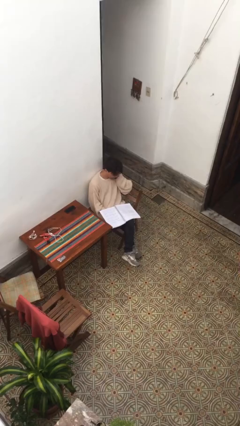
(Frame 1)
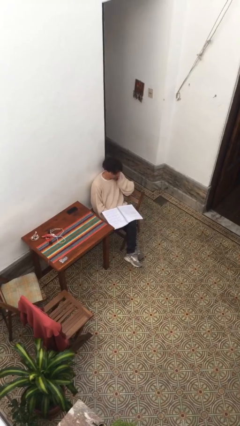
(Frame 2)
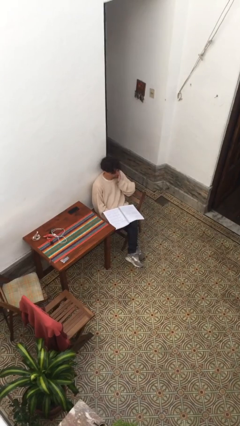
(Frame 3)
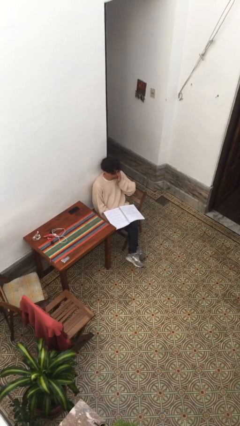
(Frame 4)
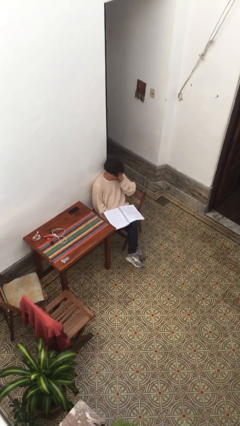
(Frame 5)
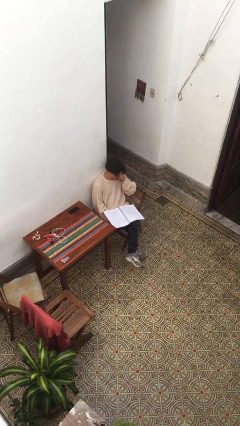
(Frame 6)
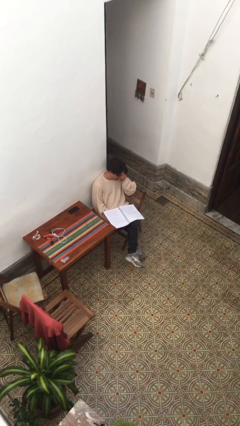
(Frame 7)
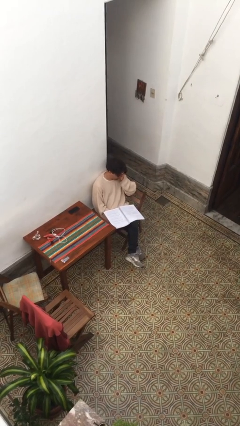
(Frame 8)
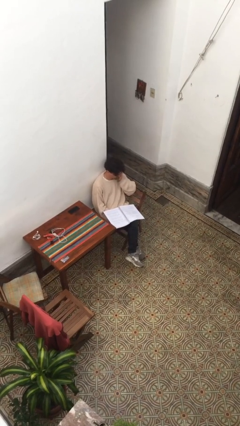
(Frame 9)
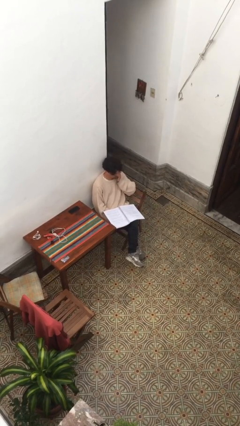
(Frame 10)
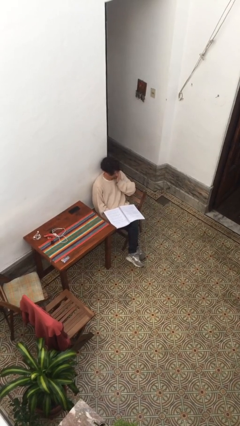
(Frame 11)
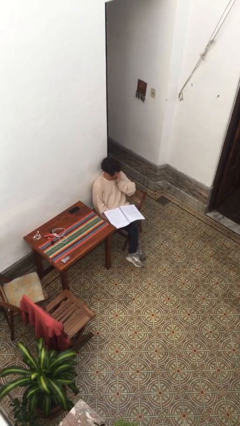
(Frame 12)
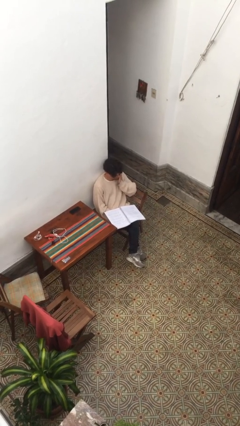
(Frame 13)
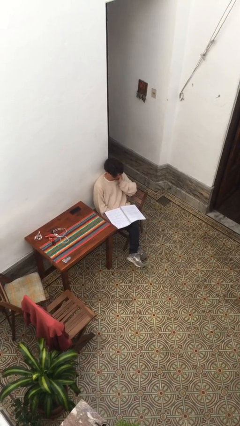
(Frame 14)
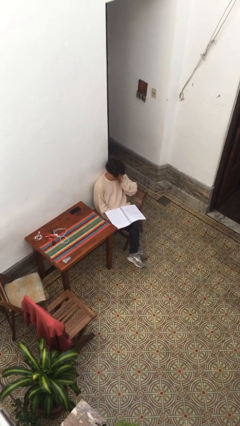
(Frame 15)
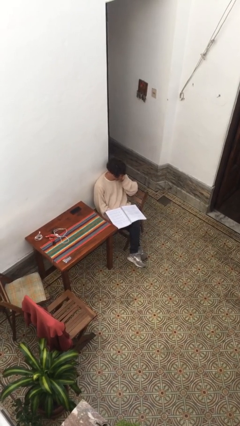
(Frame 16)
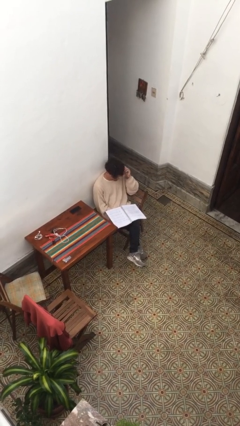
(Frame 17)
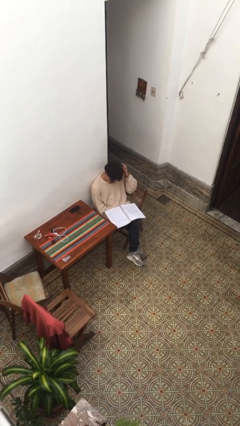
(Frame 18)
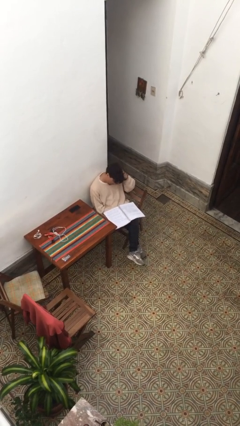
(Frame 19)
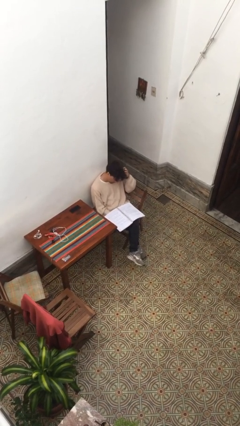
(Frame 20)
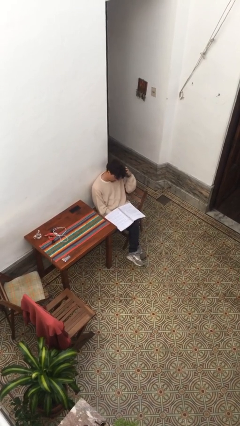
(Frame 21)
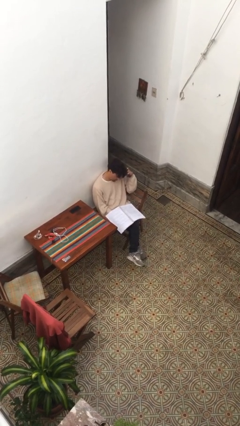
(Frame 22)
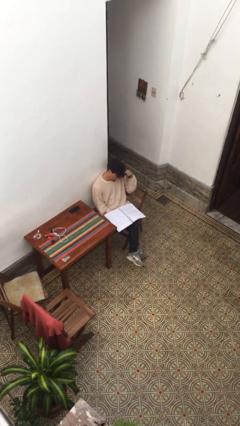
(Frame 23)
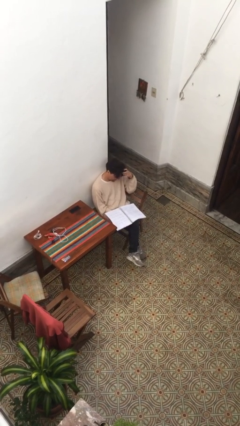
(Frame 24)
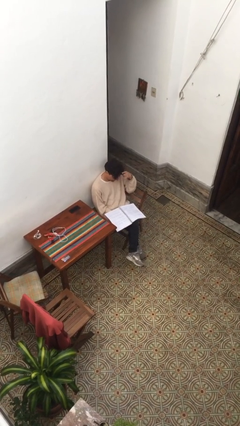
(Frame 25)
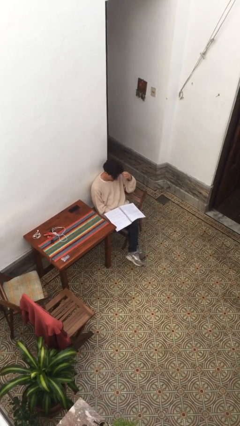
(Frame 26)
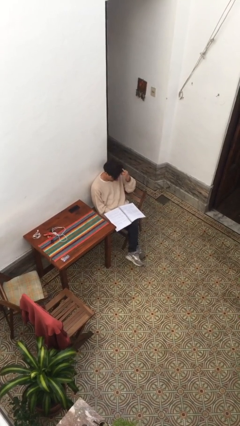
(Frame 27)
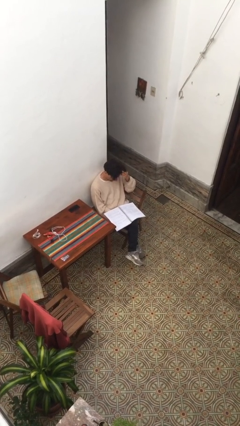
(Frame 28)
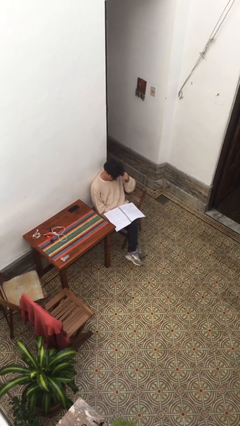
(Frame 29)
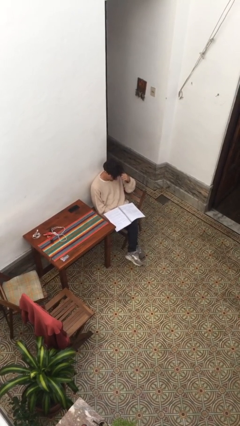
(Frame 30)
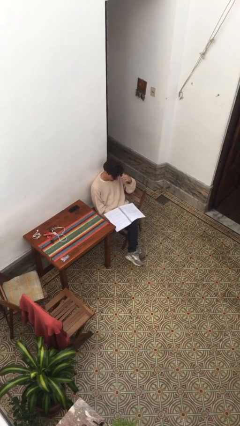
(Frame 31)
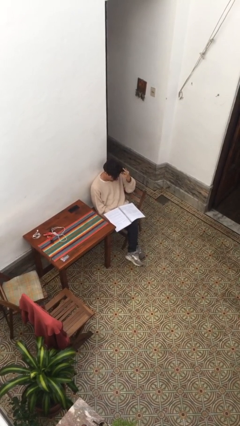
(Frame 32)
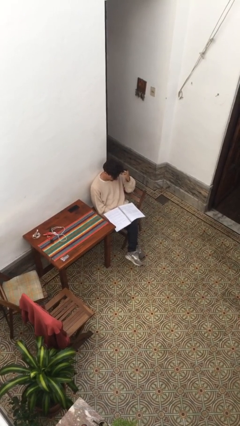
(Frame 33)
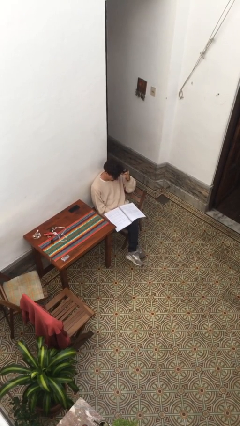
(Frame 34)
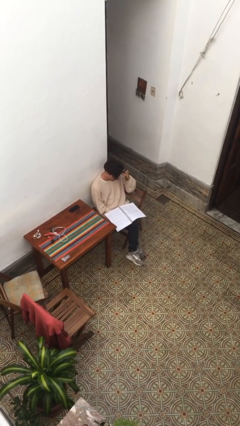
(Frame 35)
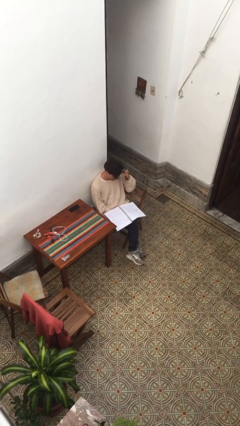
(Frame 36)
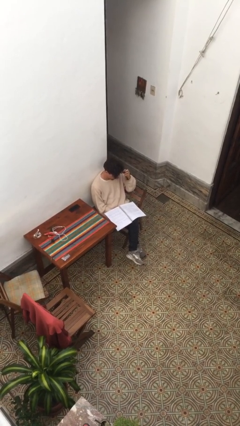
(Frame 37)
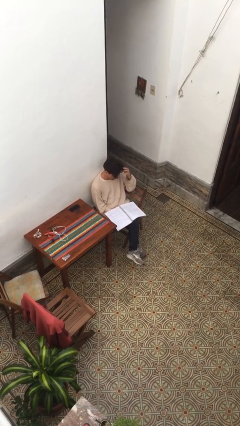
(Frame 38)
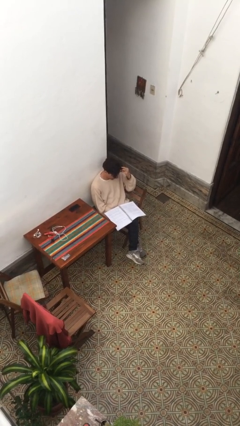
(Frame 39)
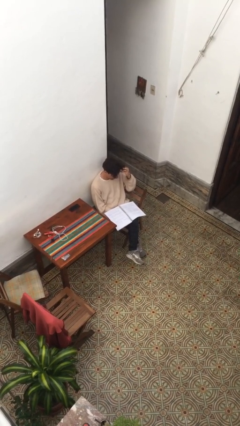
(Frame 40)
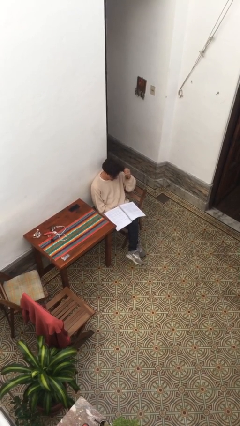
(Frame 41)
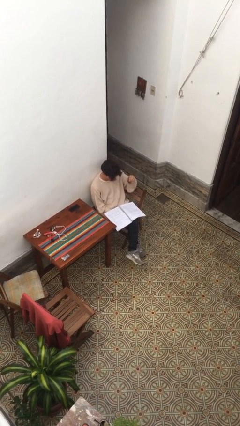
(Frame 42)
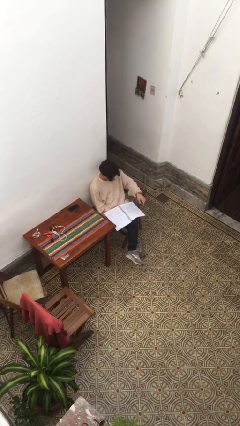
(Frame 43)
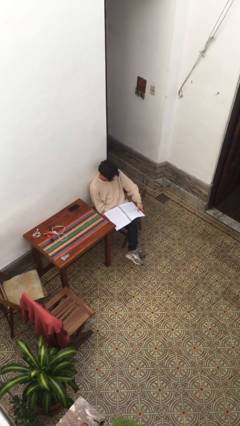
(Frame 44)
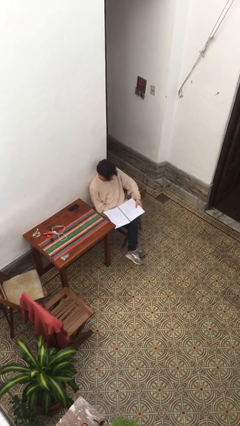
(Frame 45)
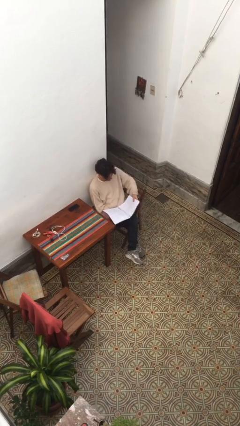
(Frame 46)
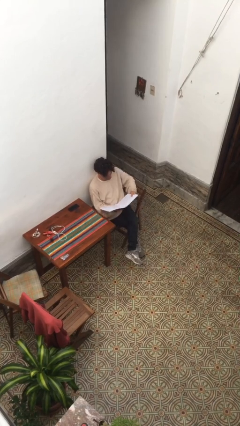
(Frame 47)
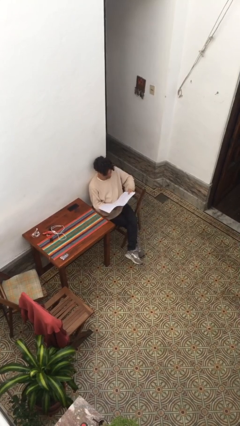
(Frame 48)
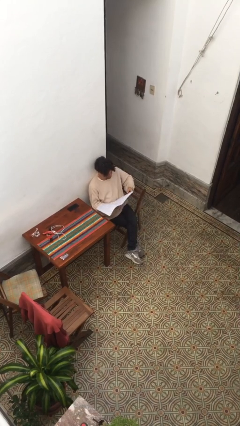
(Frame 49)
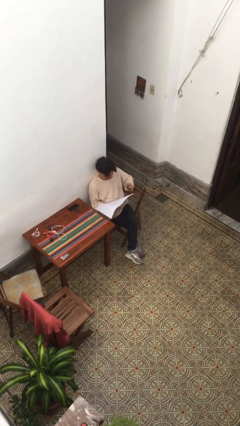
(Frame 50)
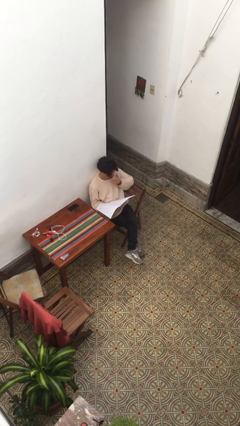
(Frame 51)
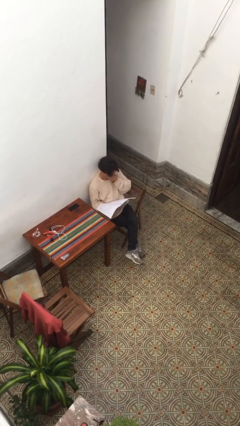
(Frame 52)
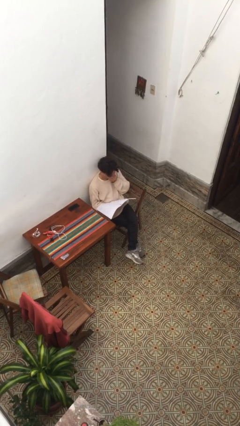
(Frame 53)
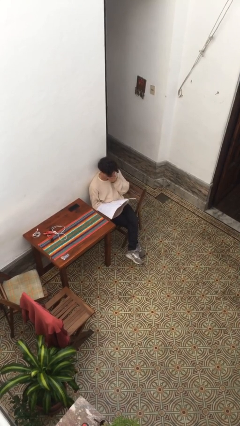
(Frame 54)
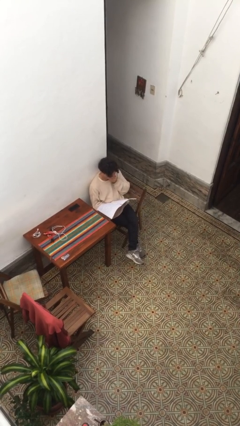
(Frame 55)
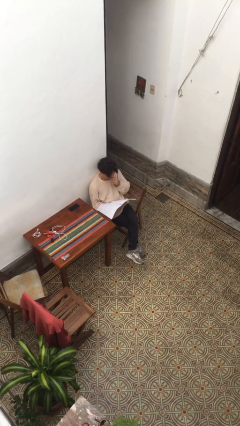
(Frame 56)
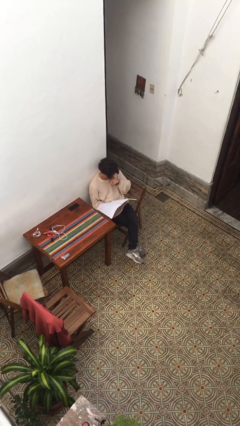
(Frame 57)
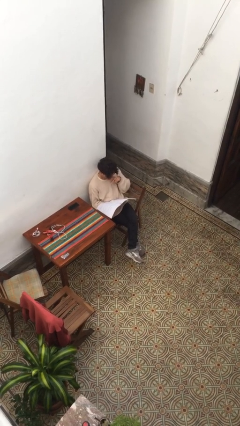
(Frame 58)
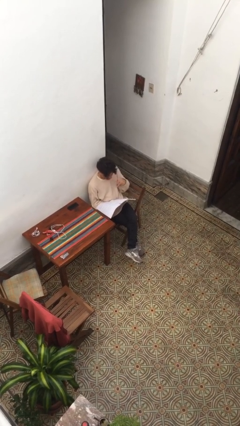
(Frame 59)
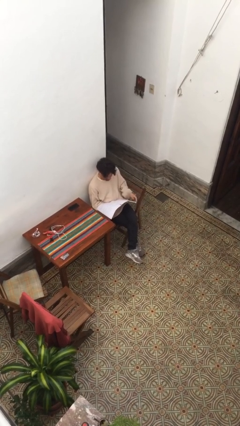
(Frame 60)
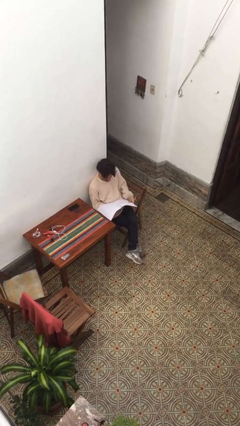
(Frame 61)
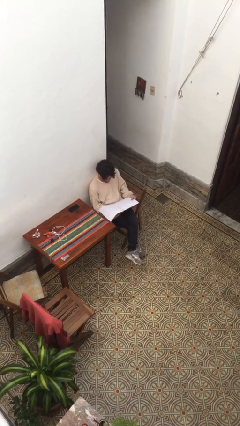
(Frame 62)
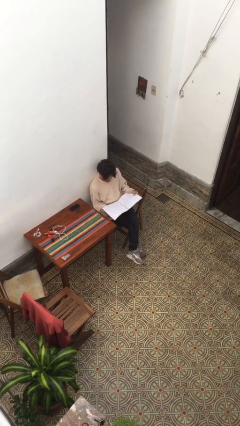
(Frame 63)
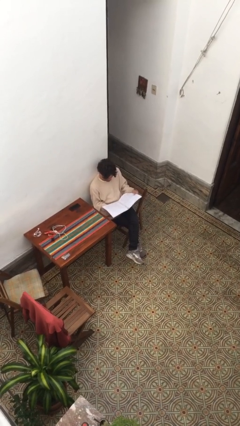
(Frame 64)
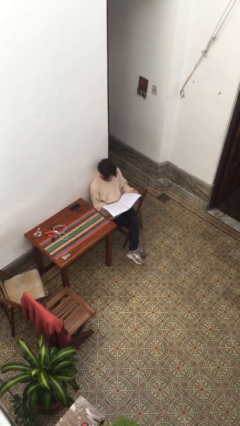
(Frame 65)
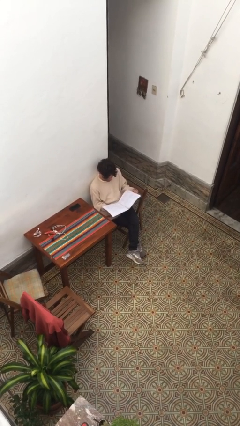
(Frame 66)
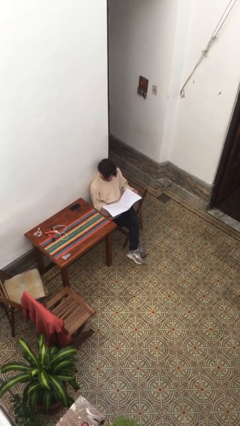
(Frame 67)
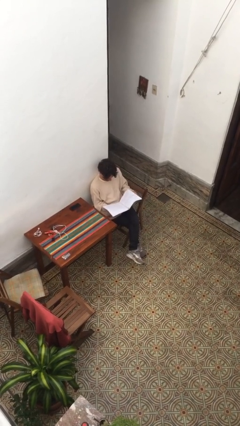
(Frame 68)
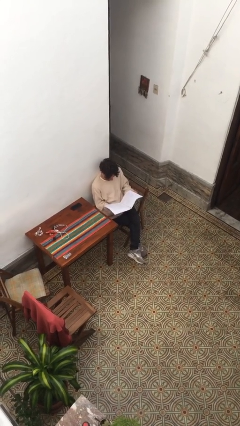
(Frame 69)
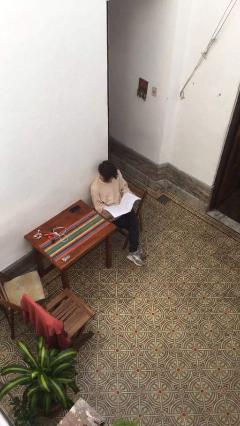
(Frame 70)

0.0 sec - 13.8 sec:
person reads document

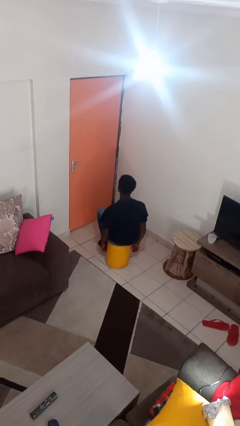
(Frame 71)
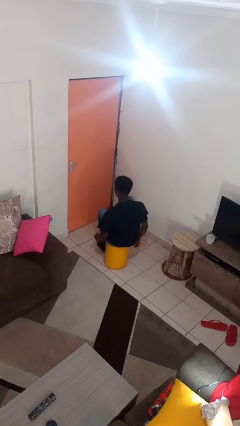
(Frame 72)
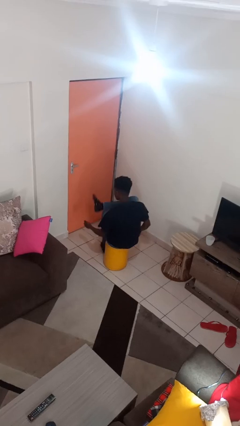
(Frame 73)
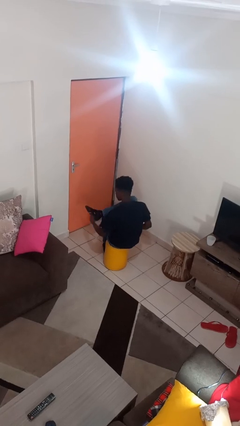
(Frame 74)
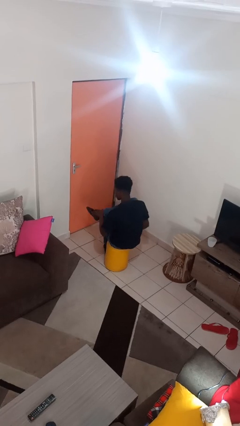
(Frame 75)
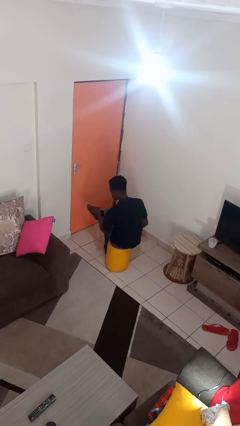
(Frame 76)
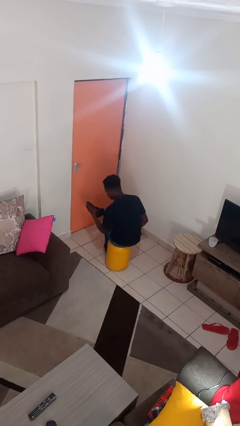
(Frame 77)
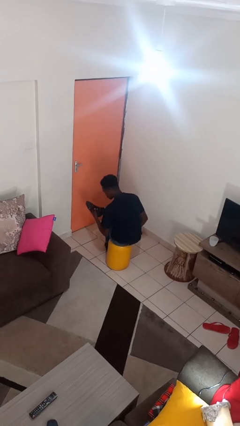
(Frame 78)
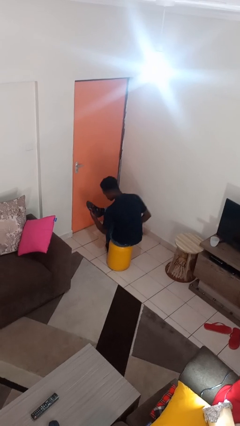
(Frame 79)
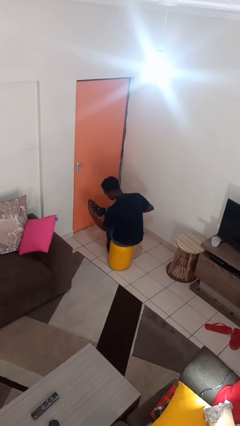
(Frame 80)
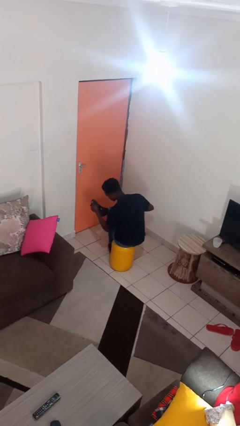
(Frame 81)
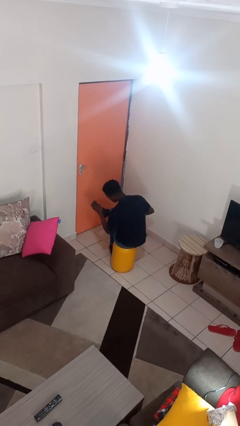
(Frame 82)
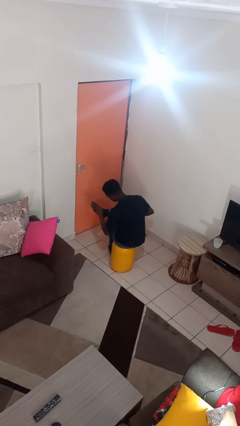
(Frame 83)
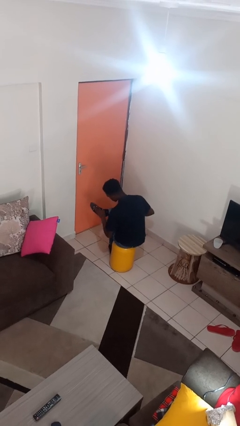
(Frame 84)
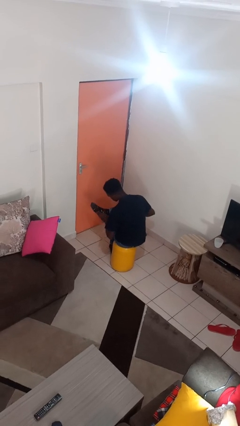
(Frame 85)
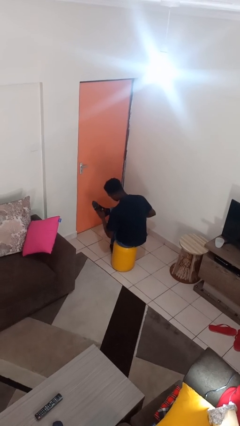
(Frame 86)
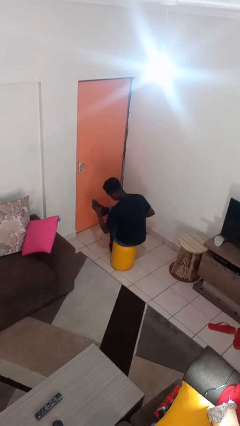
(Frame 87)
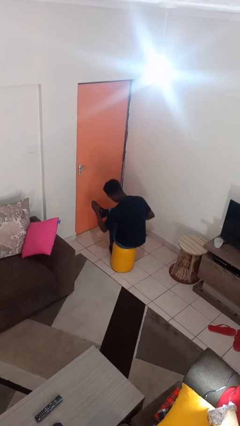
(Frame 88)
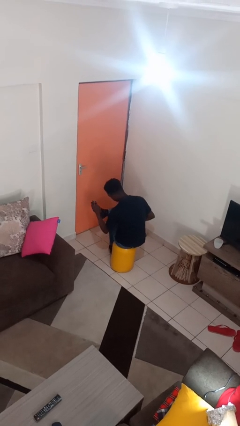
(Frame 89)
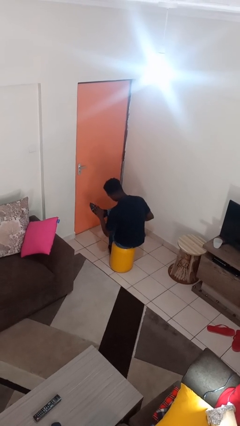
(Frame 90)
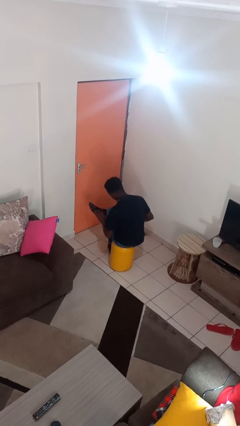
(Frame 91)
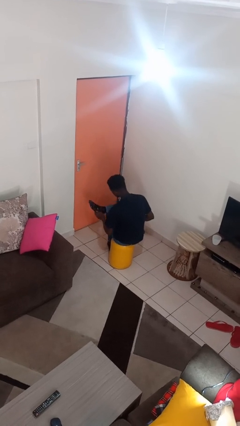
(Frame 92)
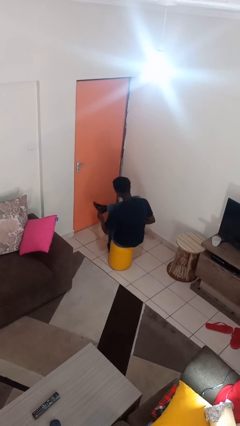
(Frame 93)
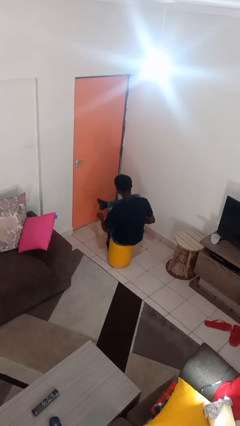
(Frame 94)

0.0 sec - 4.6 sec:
person rubs foot
